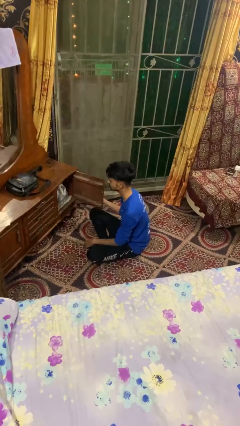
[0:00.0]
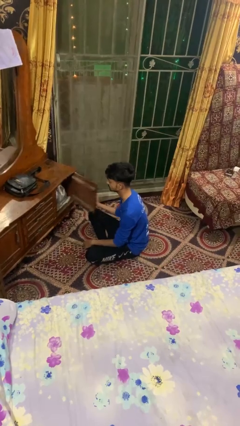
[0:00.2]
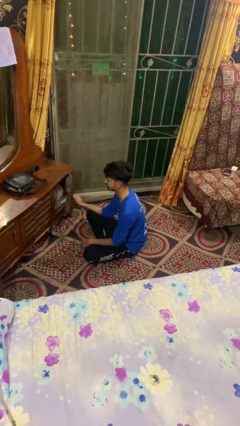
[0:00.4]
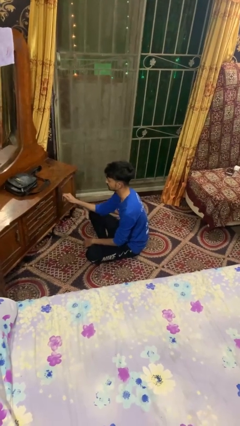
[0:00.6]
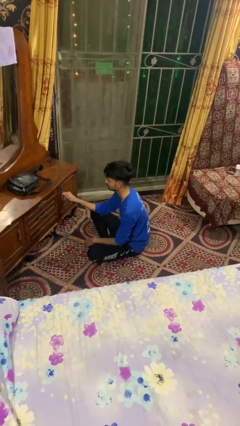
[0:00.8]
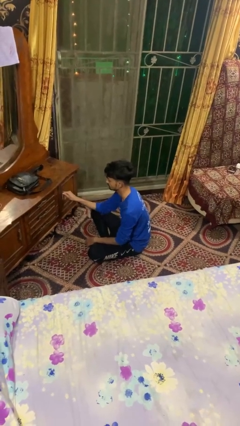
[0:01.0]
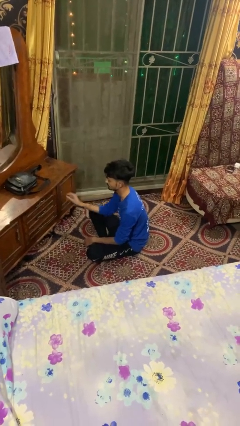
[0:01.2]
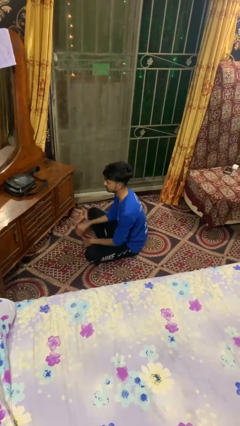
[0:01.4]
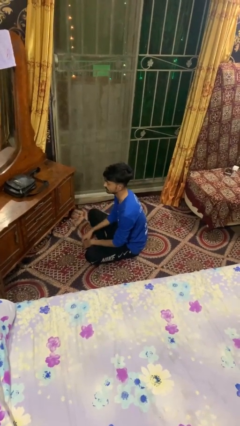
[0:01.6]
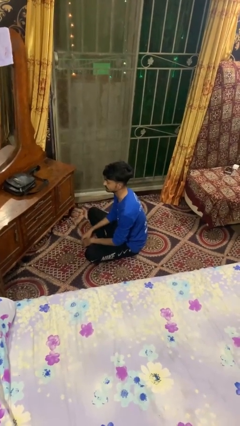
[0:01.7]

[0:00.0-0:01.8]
person closes dresser drawer

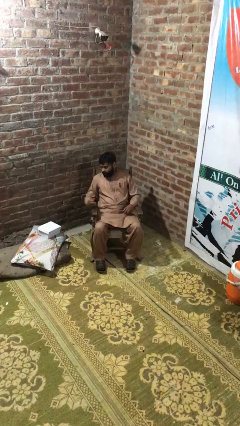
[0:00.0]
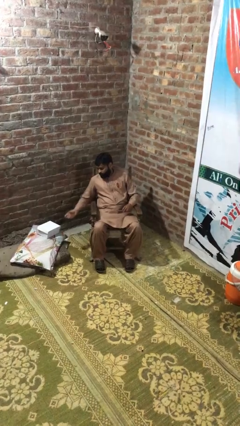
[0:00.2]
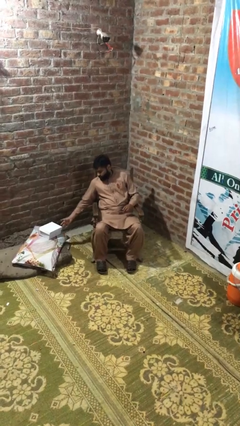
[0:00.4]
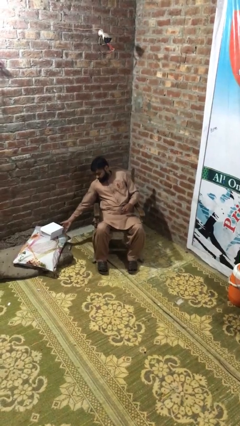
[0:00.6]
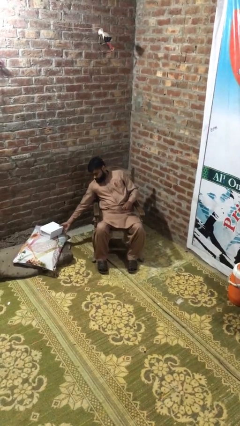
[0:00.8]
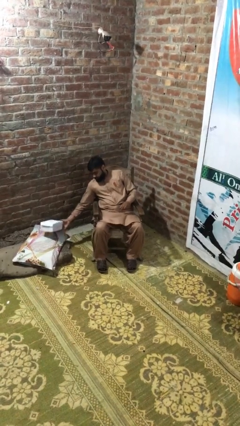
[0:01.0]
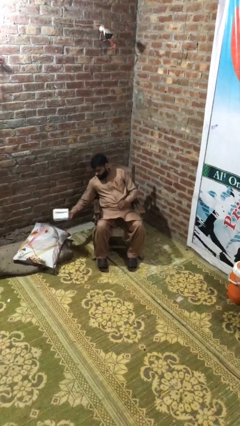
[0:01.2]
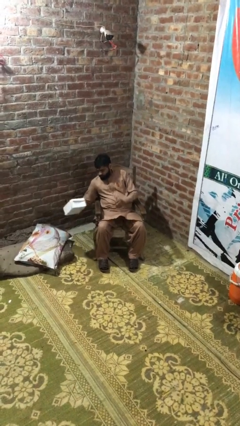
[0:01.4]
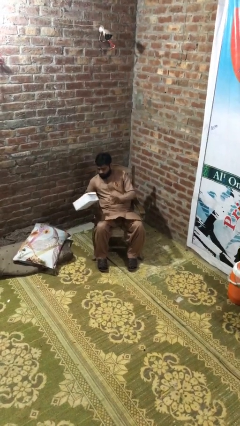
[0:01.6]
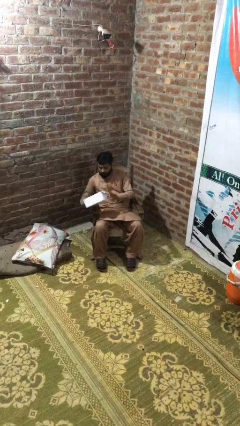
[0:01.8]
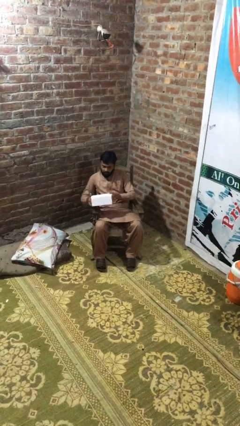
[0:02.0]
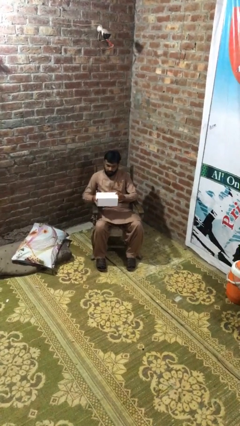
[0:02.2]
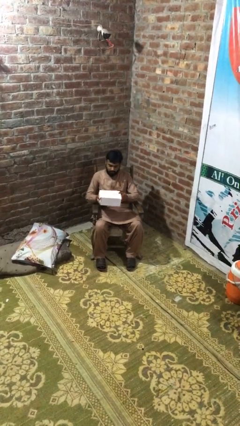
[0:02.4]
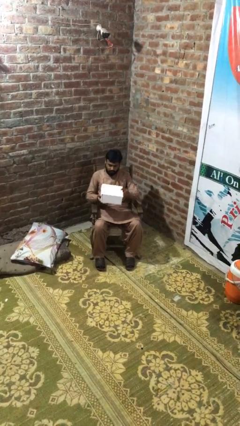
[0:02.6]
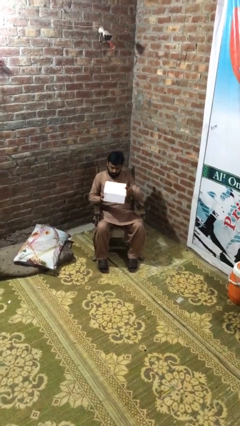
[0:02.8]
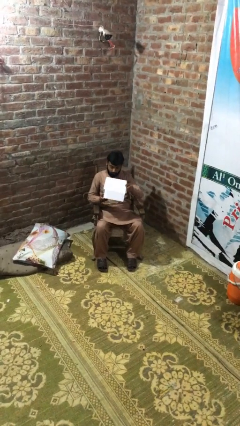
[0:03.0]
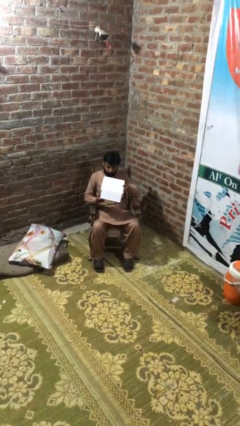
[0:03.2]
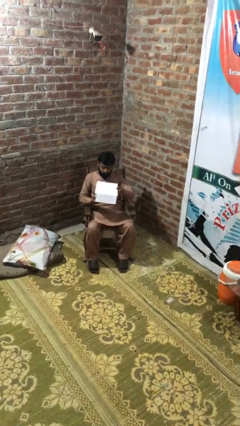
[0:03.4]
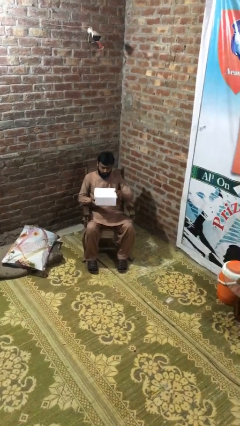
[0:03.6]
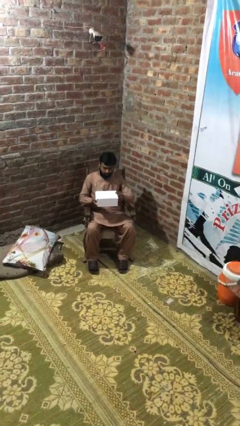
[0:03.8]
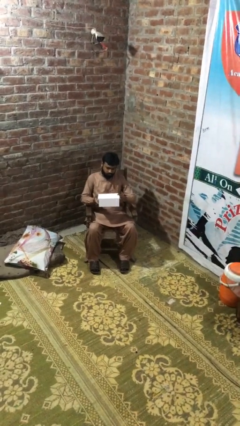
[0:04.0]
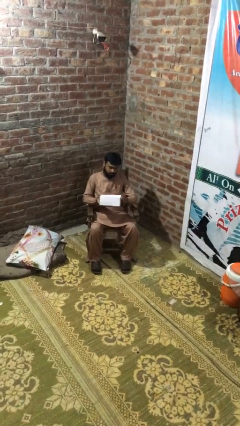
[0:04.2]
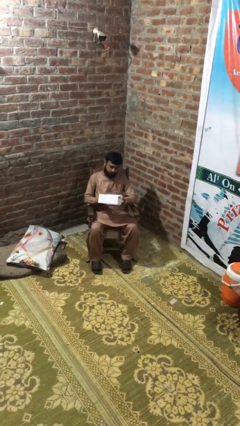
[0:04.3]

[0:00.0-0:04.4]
person picks up object from floor

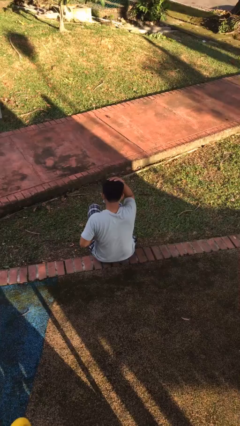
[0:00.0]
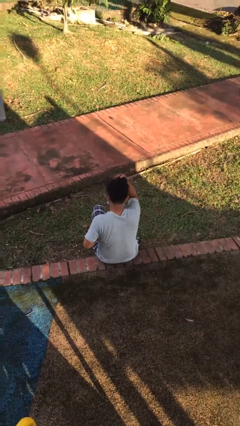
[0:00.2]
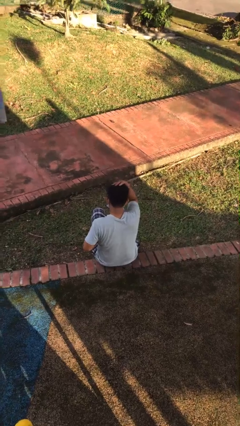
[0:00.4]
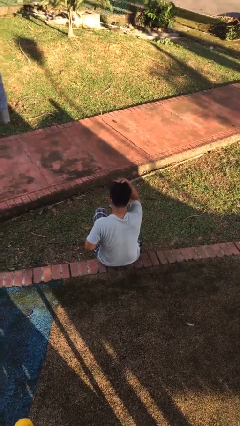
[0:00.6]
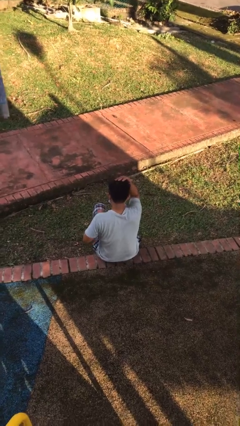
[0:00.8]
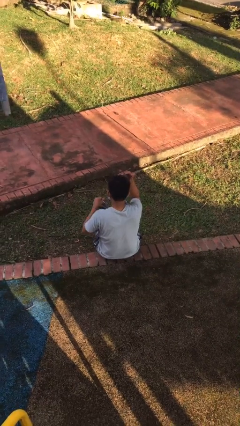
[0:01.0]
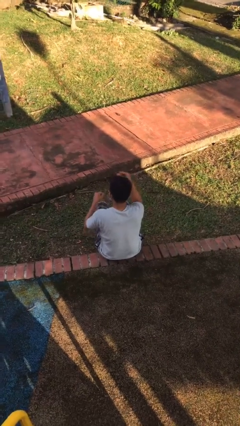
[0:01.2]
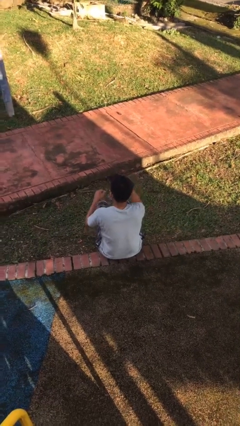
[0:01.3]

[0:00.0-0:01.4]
person pats head

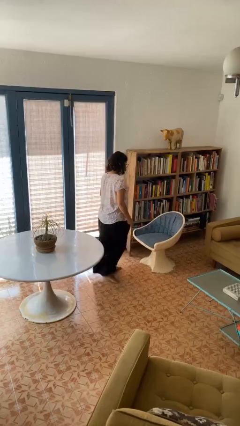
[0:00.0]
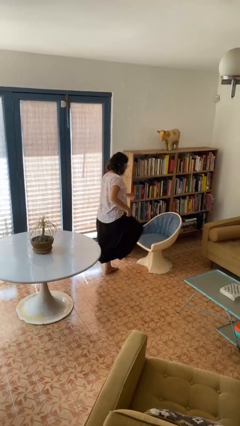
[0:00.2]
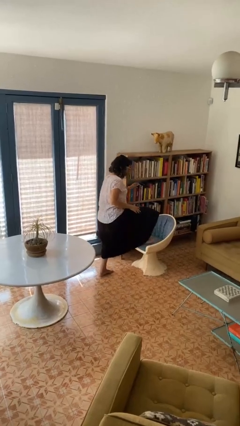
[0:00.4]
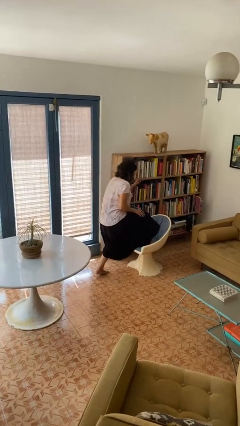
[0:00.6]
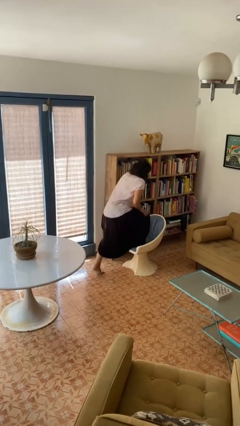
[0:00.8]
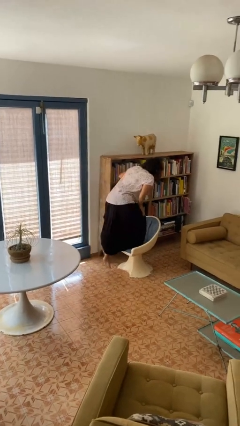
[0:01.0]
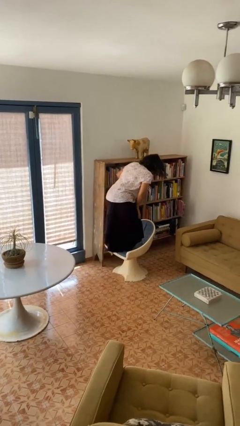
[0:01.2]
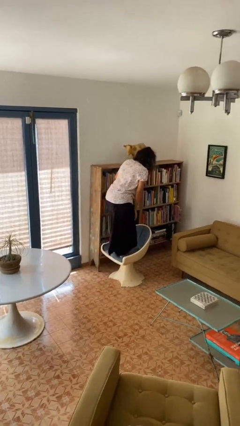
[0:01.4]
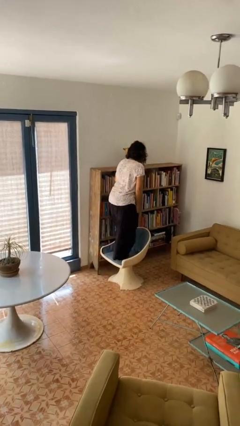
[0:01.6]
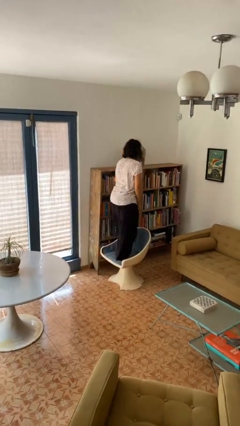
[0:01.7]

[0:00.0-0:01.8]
person climbs on chair

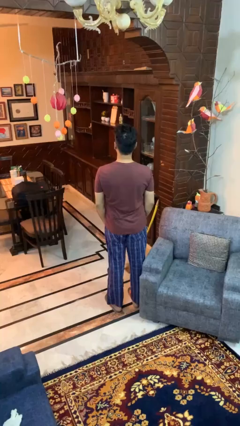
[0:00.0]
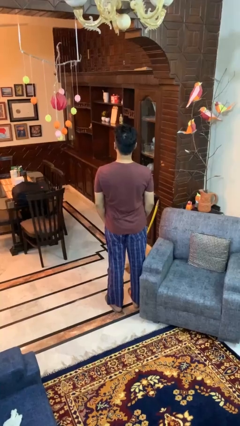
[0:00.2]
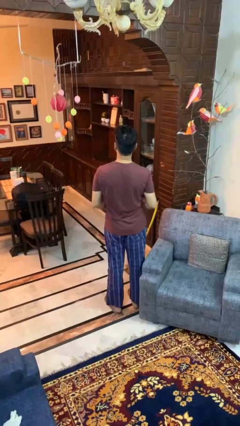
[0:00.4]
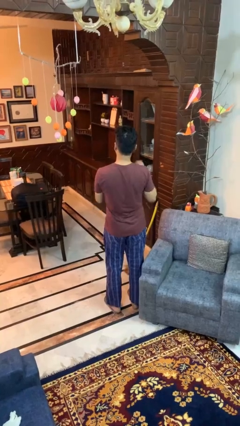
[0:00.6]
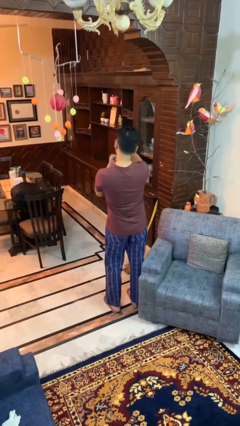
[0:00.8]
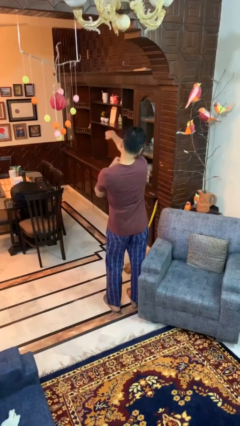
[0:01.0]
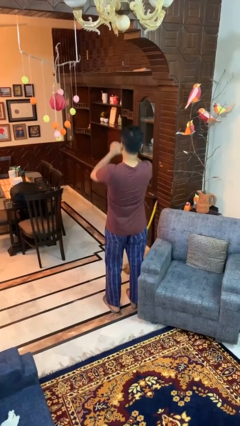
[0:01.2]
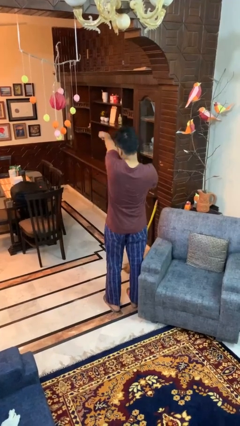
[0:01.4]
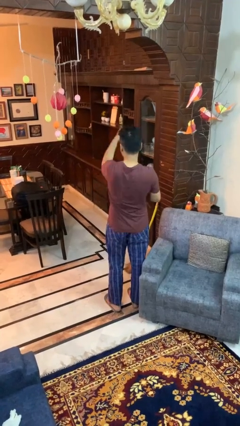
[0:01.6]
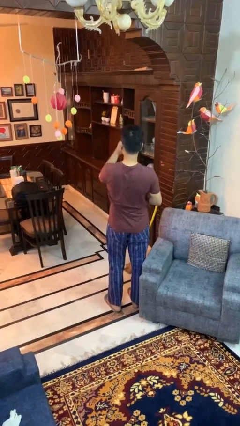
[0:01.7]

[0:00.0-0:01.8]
person punches

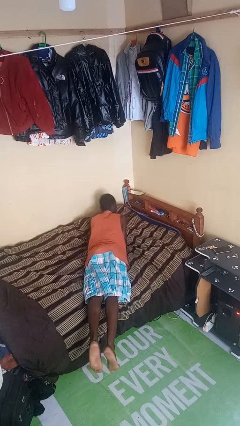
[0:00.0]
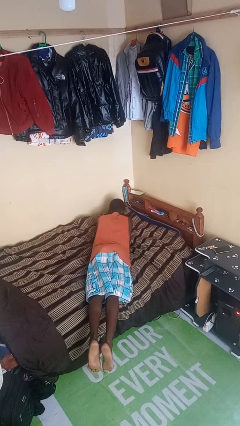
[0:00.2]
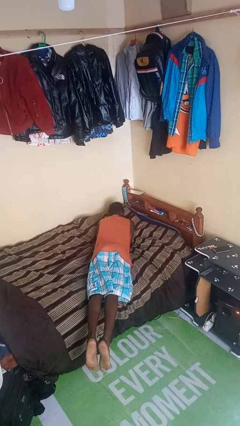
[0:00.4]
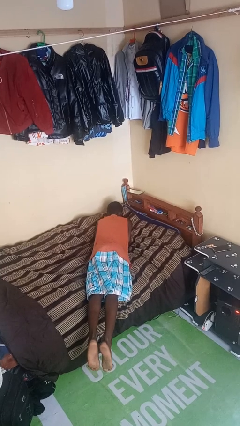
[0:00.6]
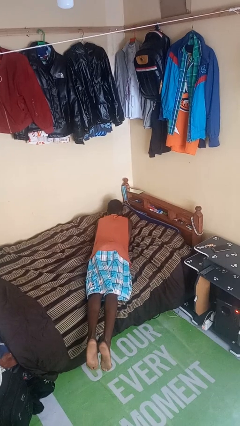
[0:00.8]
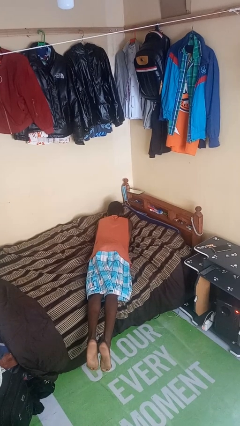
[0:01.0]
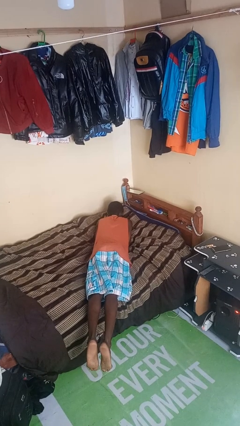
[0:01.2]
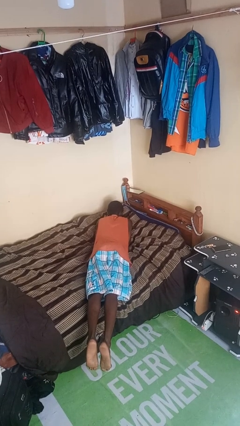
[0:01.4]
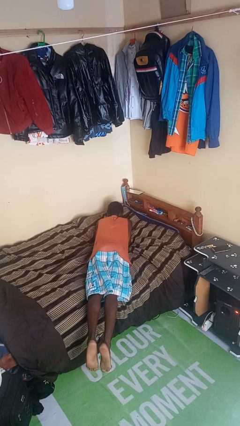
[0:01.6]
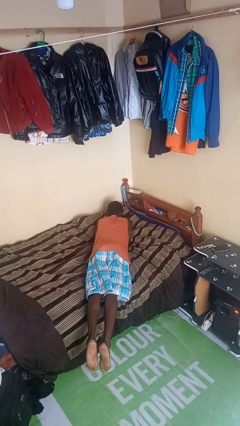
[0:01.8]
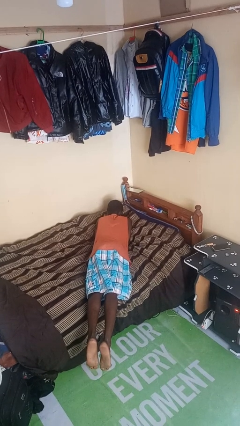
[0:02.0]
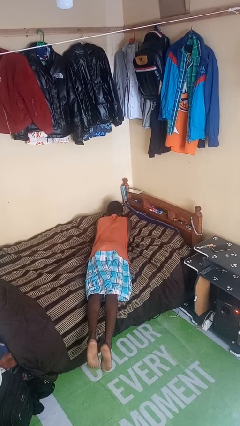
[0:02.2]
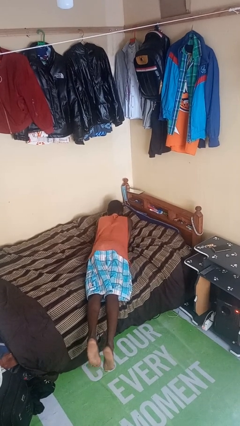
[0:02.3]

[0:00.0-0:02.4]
person lies down on bed

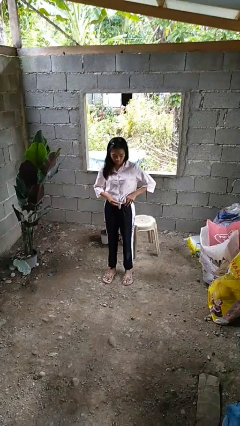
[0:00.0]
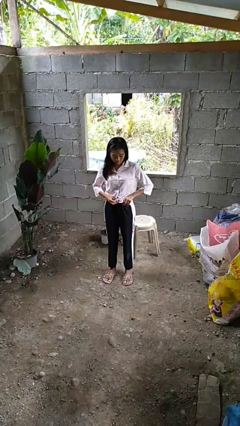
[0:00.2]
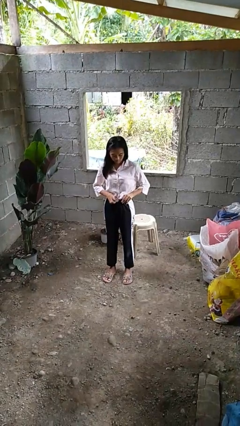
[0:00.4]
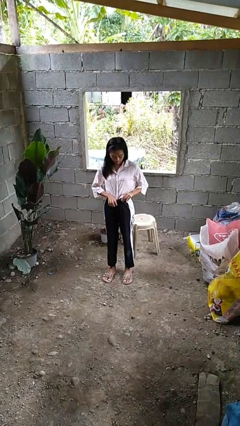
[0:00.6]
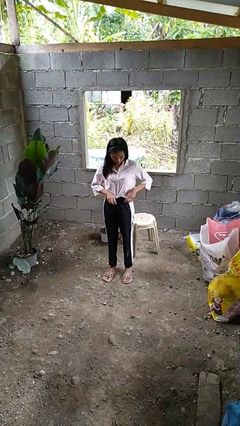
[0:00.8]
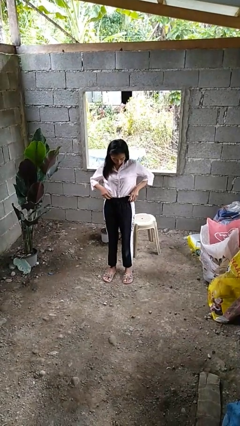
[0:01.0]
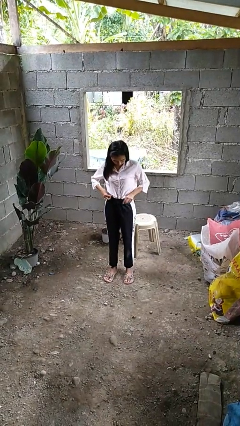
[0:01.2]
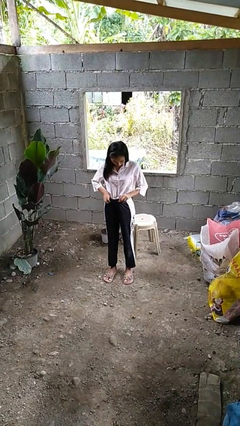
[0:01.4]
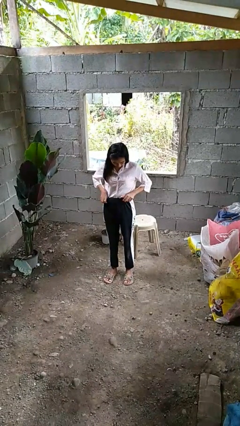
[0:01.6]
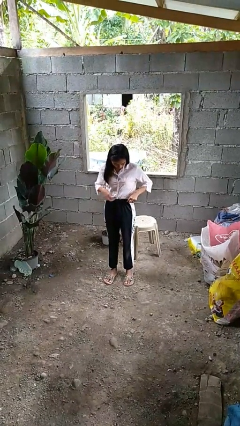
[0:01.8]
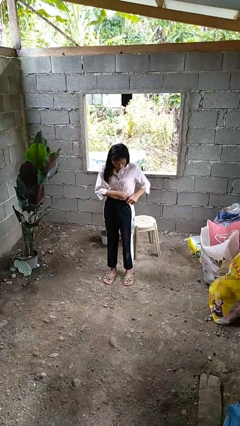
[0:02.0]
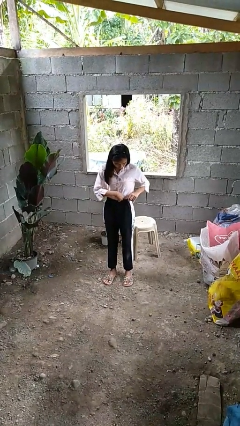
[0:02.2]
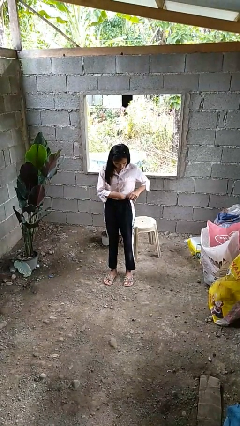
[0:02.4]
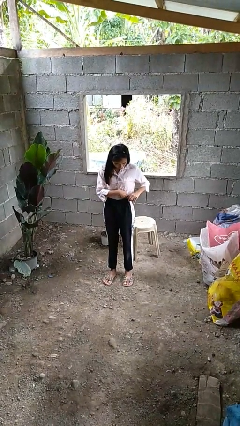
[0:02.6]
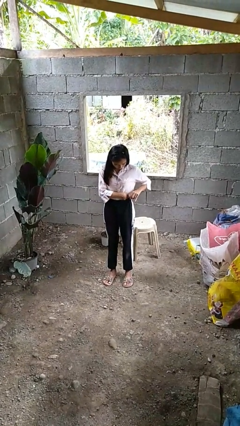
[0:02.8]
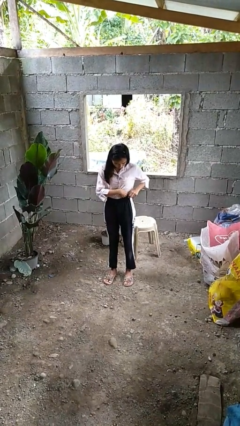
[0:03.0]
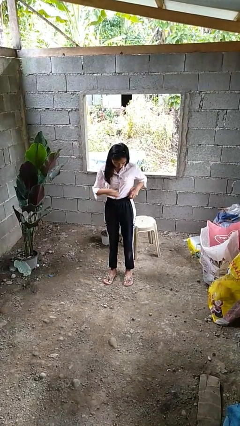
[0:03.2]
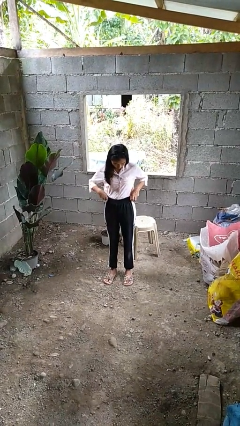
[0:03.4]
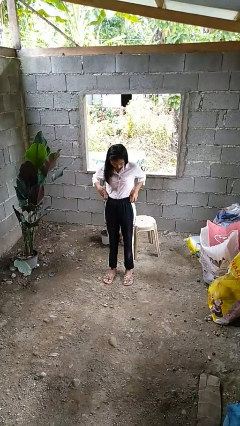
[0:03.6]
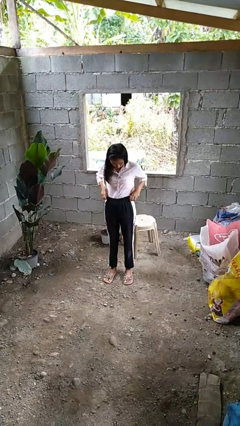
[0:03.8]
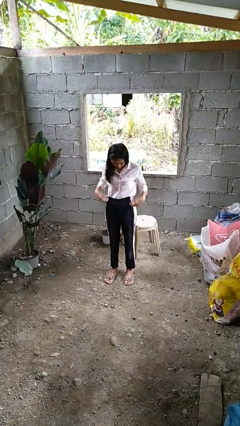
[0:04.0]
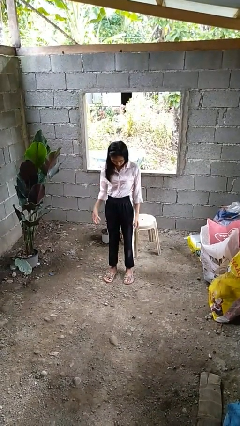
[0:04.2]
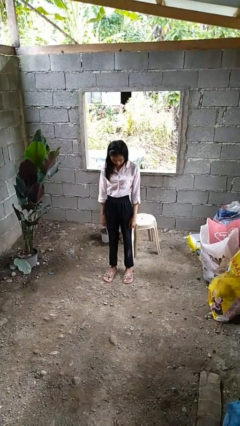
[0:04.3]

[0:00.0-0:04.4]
person tucks in shirt
